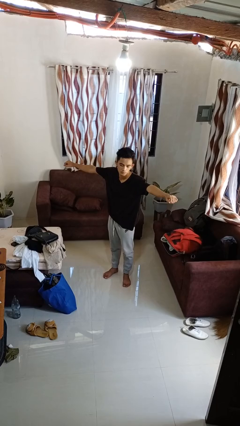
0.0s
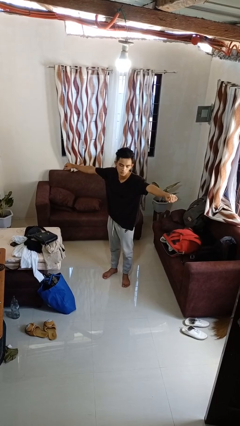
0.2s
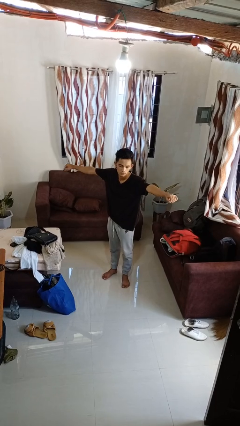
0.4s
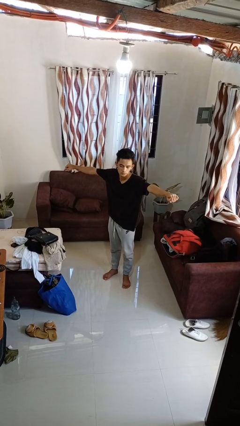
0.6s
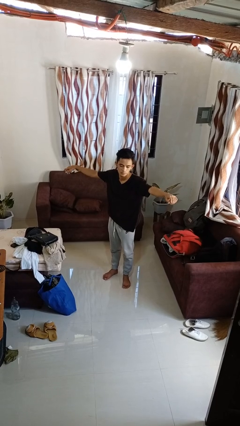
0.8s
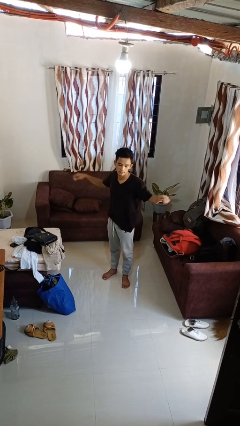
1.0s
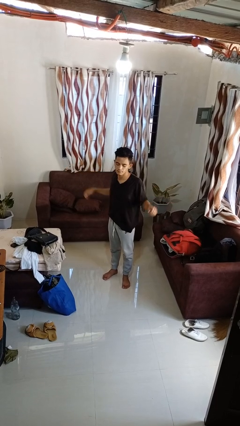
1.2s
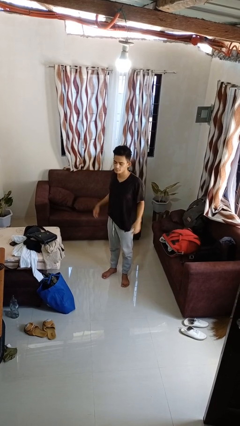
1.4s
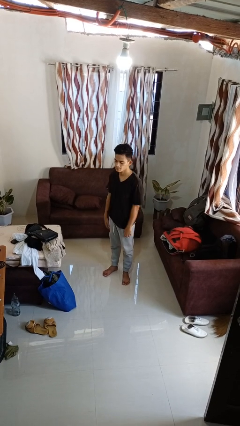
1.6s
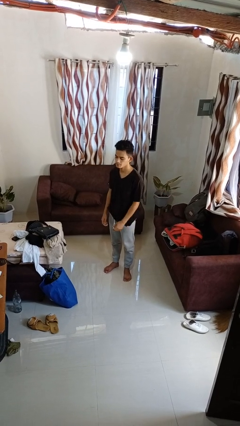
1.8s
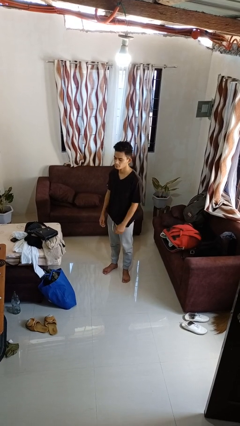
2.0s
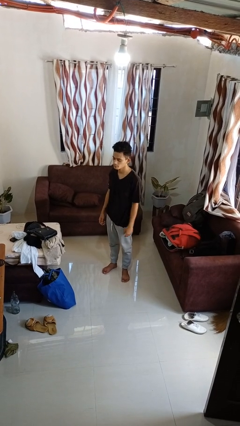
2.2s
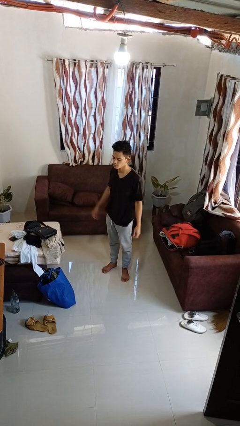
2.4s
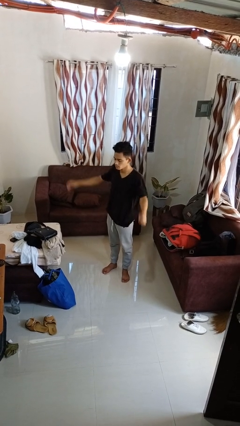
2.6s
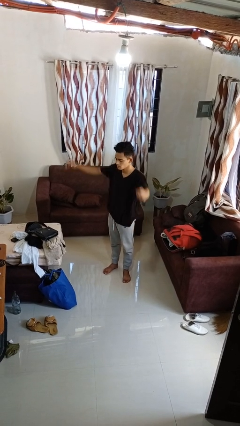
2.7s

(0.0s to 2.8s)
person stretches arms to side

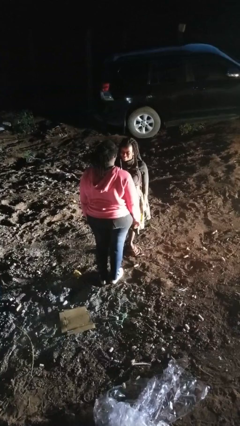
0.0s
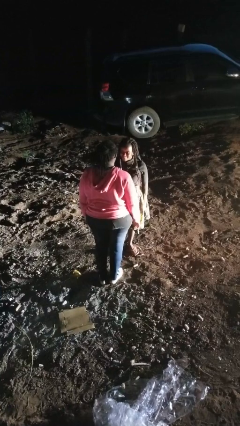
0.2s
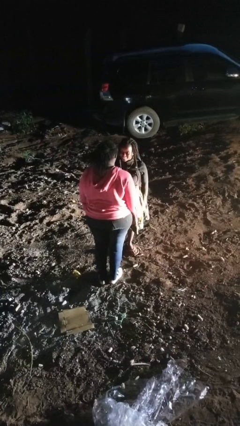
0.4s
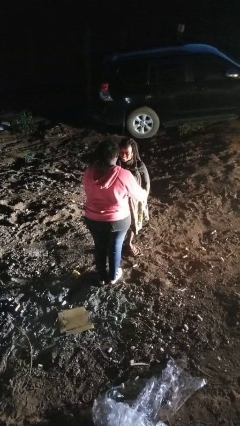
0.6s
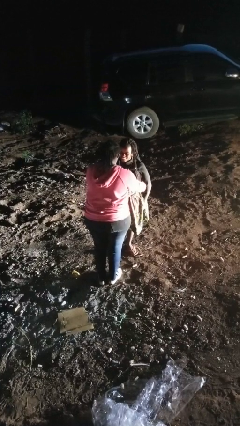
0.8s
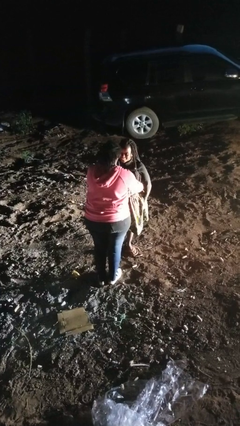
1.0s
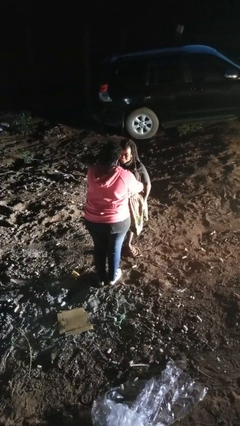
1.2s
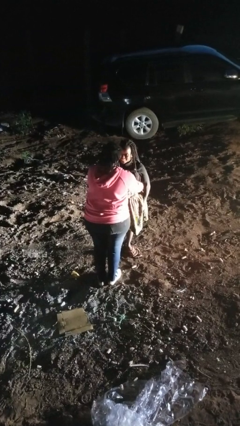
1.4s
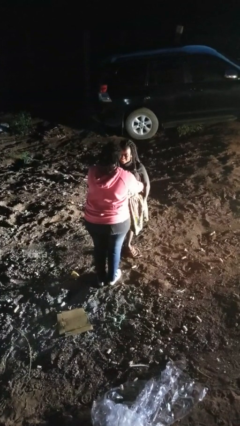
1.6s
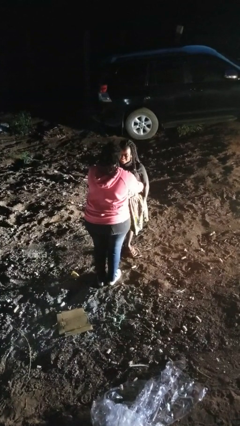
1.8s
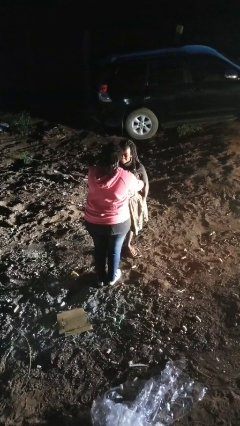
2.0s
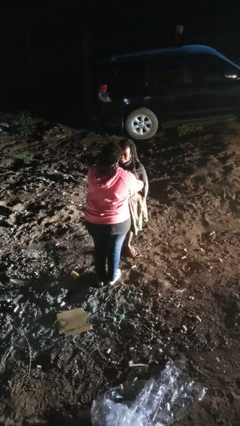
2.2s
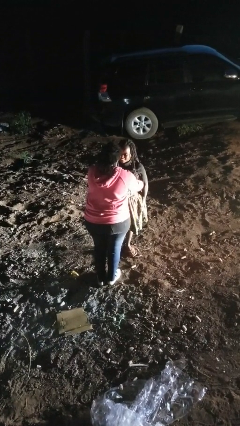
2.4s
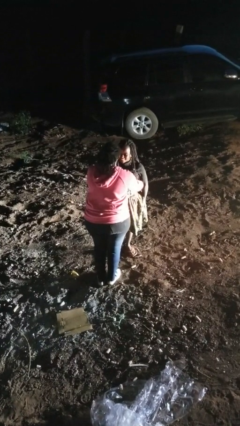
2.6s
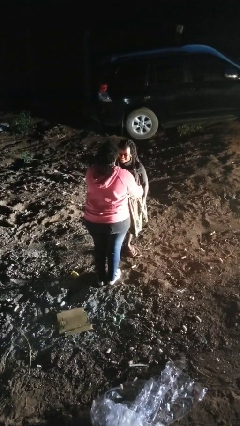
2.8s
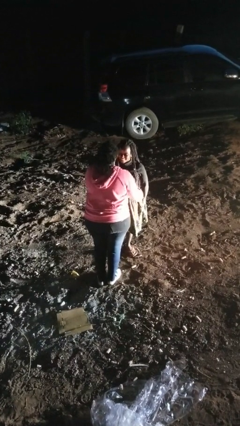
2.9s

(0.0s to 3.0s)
person tickles person

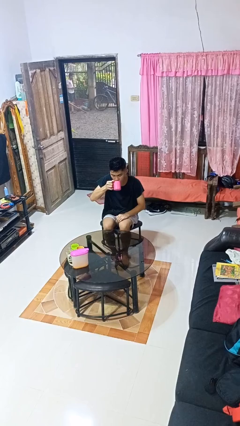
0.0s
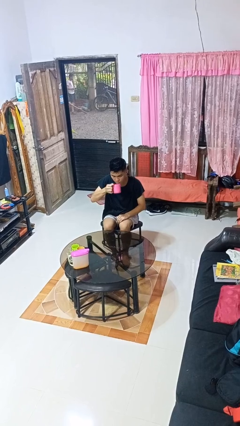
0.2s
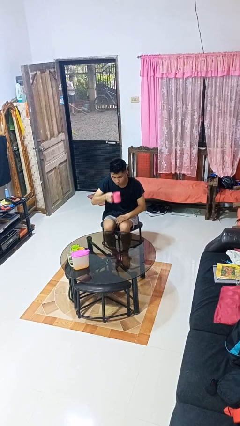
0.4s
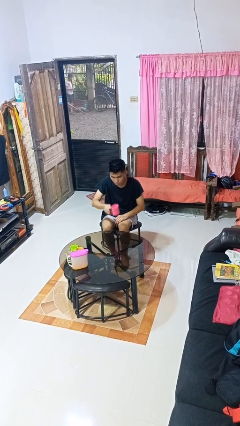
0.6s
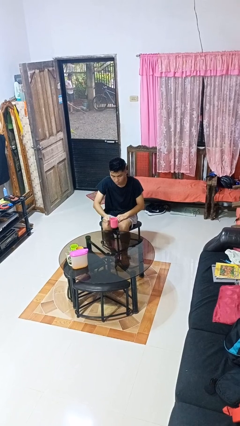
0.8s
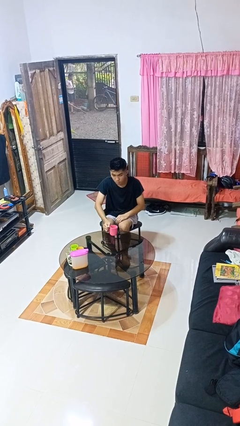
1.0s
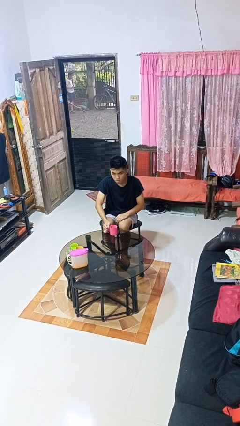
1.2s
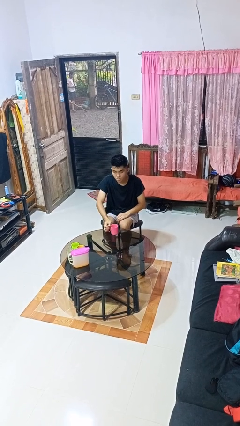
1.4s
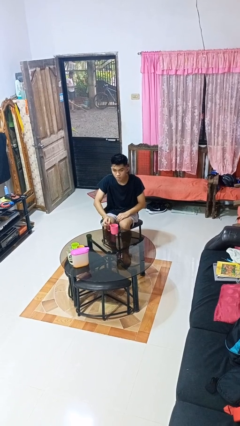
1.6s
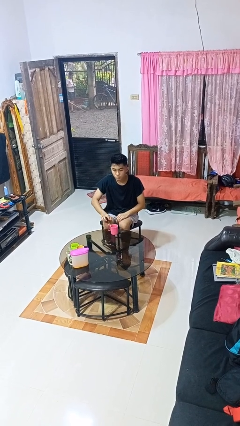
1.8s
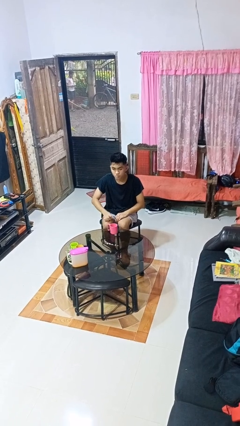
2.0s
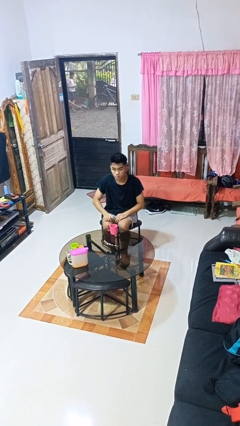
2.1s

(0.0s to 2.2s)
person puts down object on table

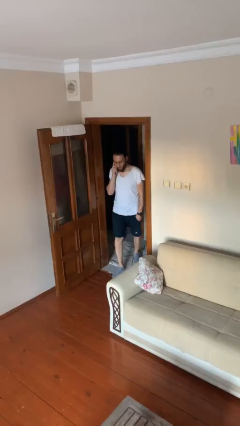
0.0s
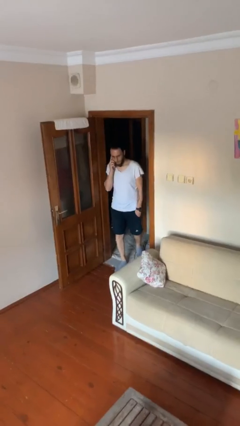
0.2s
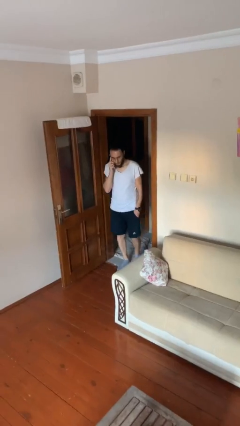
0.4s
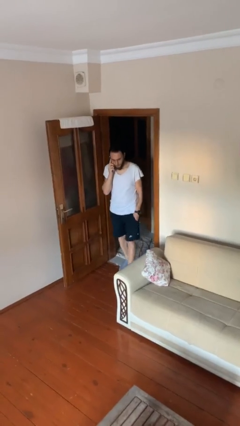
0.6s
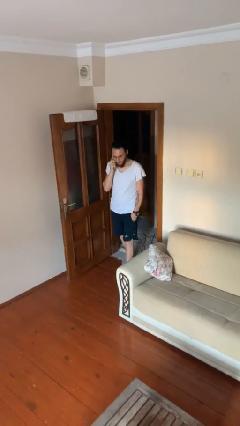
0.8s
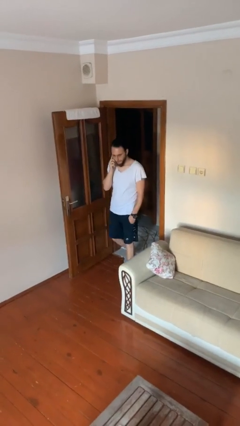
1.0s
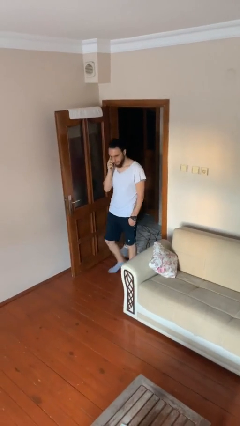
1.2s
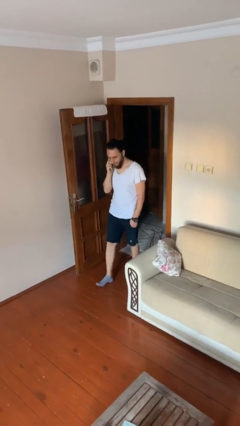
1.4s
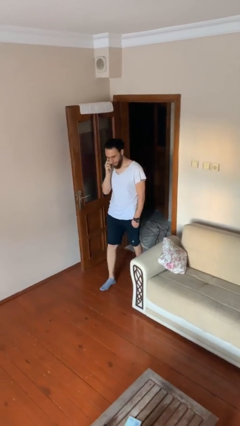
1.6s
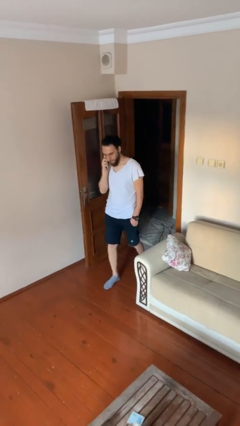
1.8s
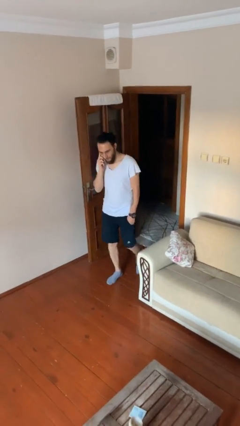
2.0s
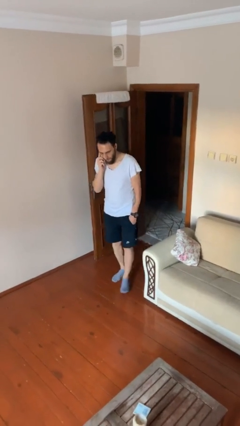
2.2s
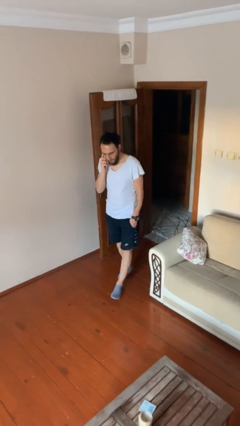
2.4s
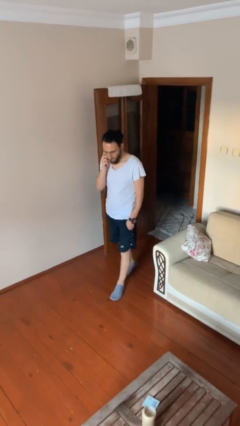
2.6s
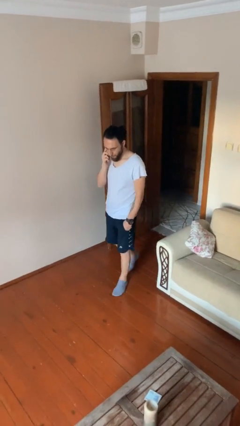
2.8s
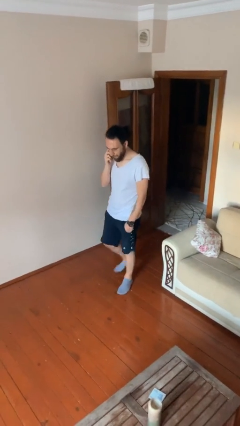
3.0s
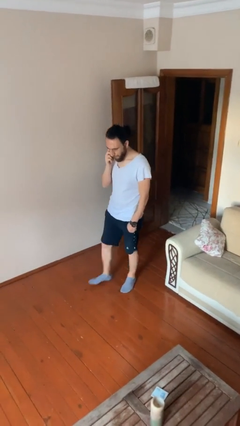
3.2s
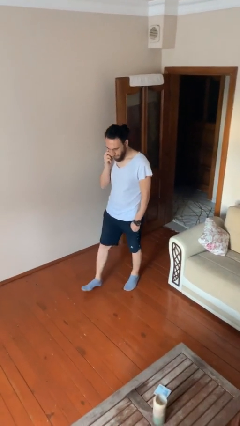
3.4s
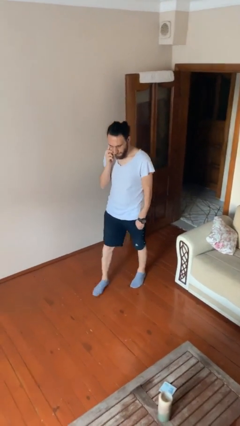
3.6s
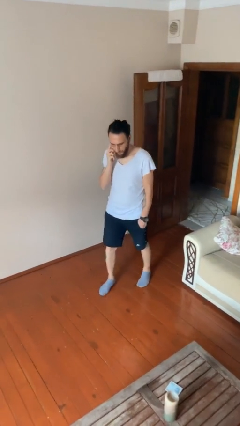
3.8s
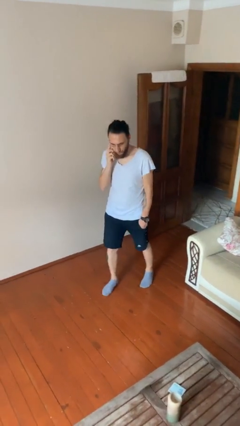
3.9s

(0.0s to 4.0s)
person enters scene through structure

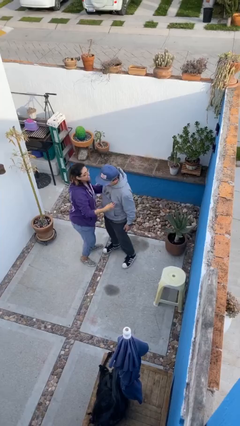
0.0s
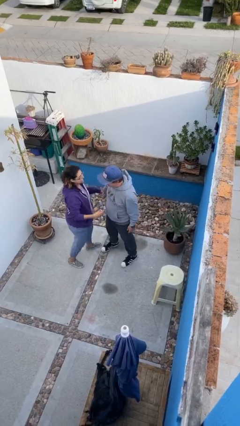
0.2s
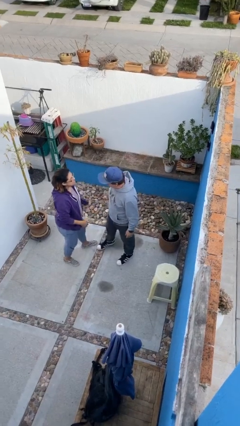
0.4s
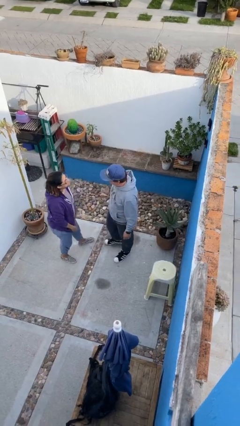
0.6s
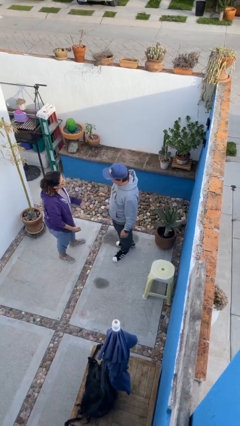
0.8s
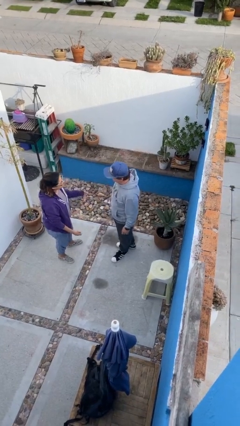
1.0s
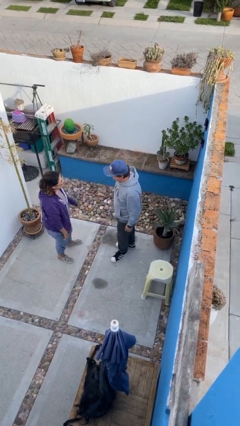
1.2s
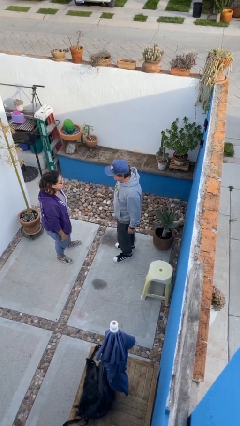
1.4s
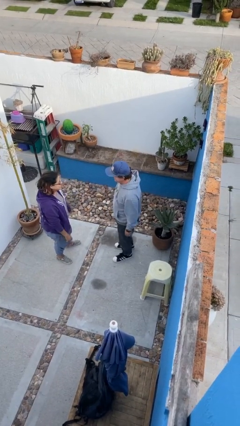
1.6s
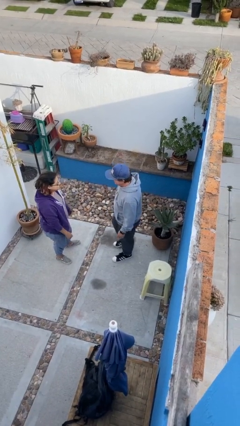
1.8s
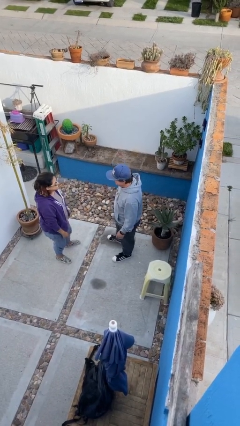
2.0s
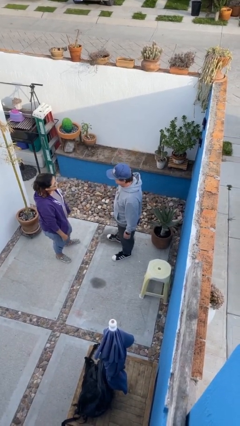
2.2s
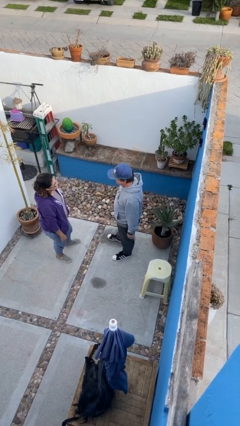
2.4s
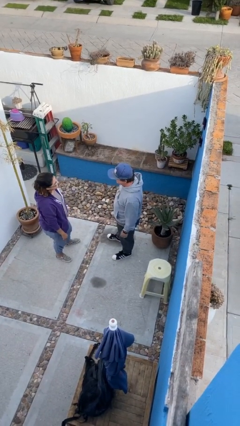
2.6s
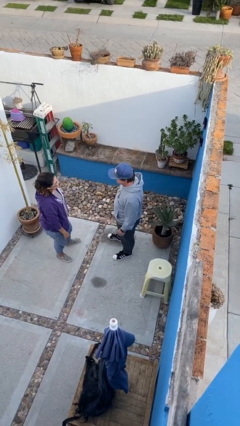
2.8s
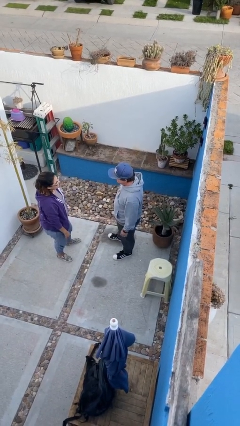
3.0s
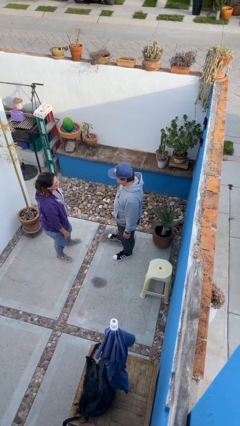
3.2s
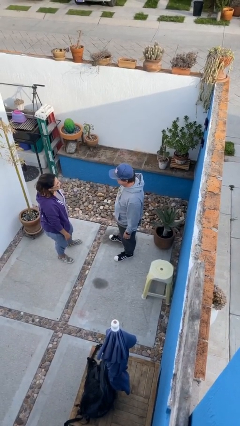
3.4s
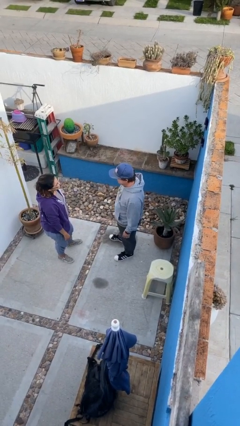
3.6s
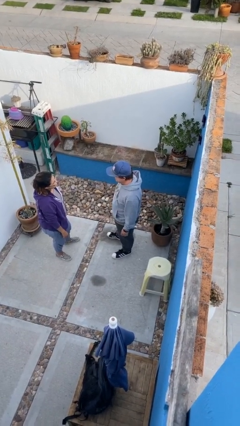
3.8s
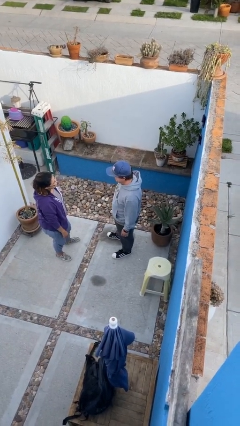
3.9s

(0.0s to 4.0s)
person talks to person

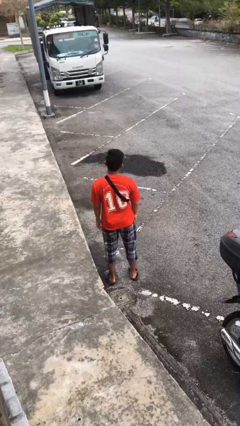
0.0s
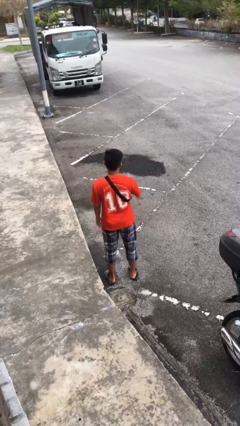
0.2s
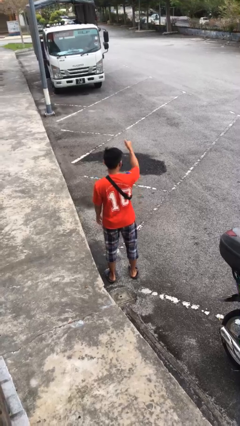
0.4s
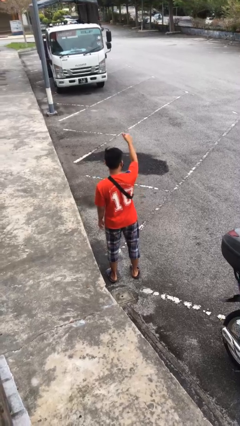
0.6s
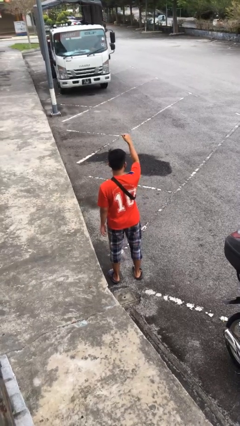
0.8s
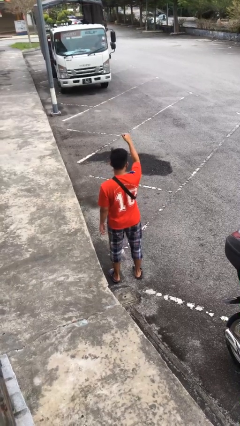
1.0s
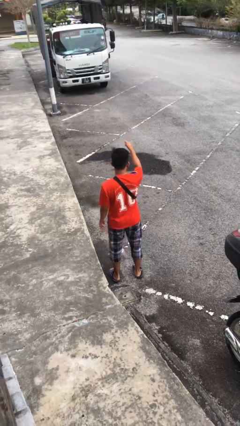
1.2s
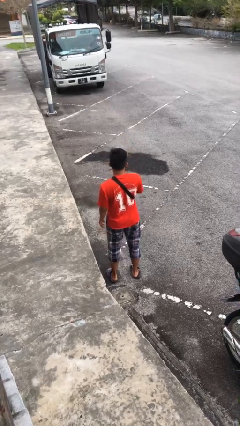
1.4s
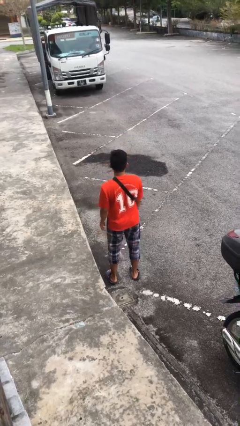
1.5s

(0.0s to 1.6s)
person gestures thumbs up
